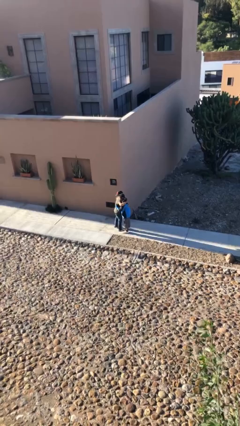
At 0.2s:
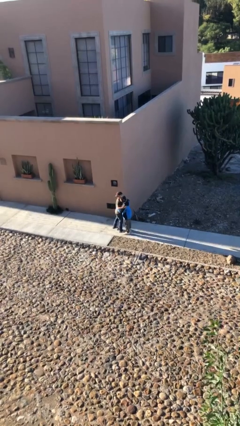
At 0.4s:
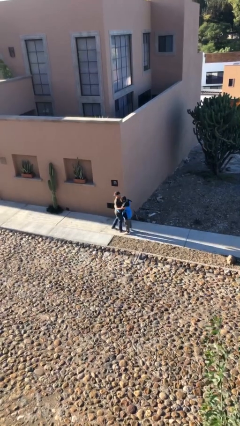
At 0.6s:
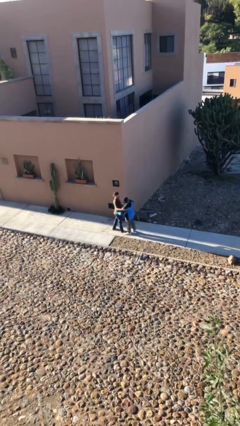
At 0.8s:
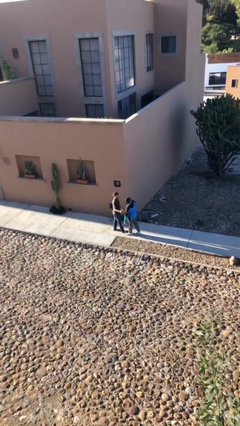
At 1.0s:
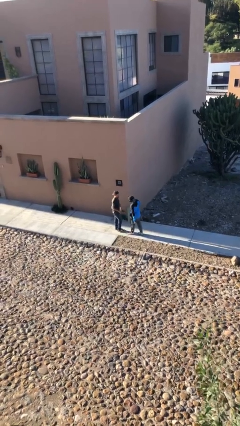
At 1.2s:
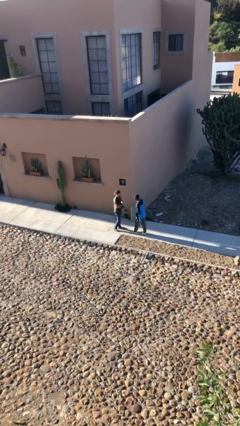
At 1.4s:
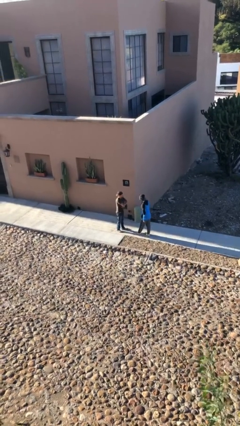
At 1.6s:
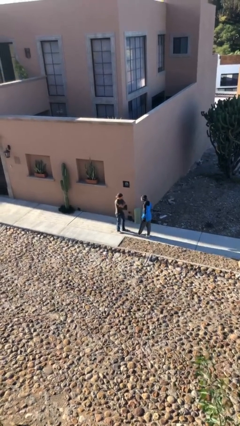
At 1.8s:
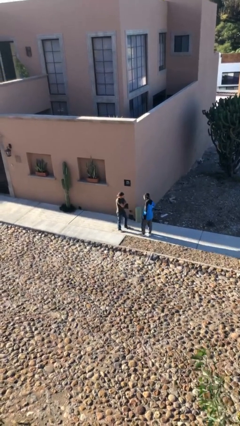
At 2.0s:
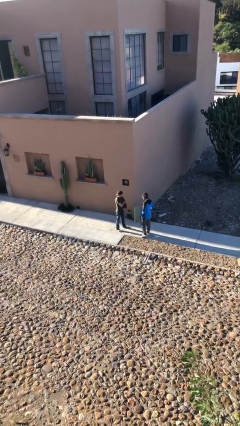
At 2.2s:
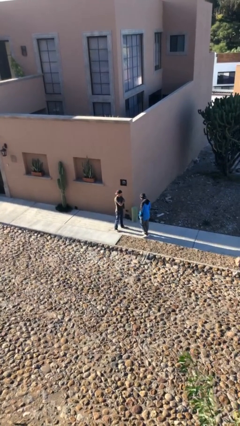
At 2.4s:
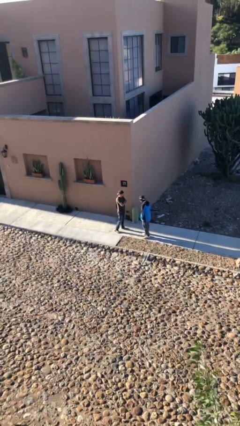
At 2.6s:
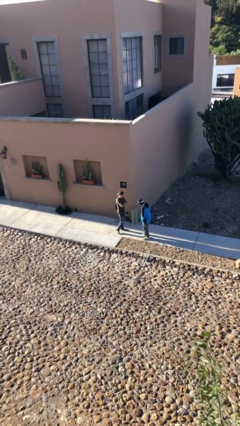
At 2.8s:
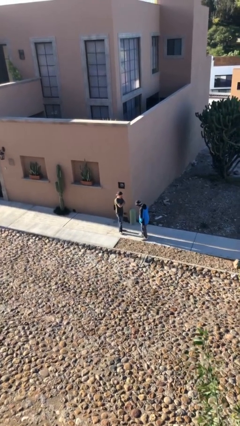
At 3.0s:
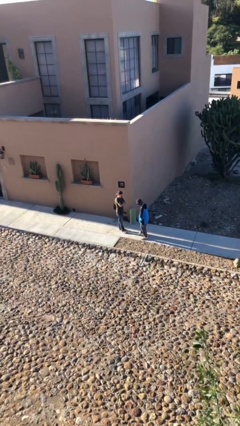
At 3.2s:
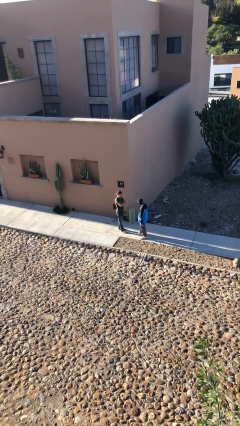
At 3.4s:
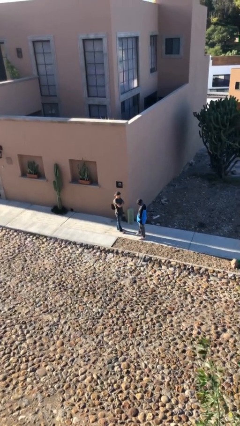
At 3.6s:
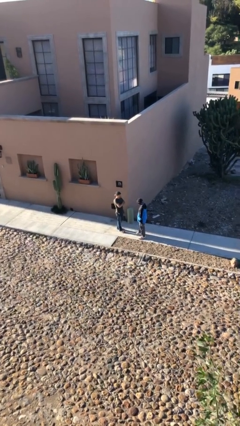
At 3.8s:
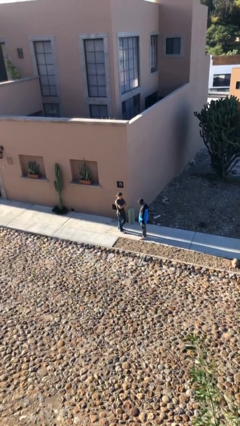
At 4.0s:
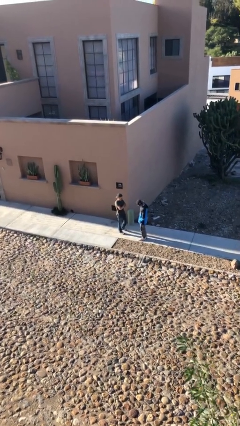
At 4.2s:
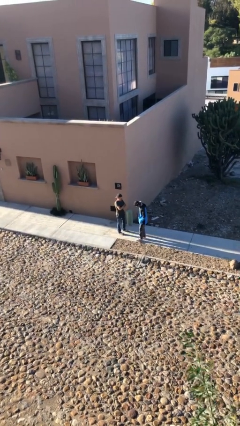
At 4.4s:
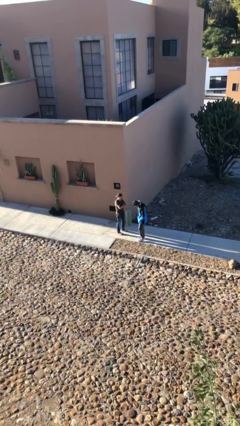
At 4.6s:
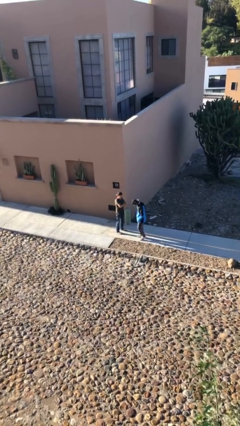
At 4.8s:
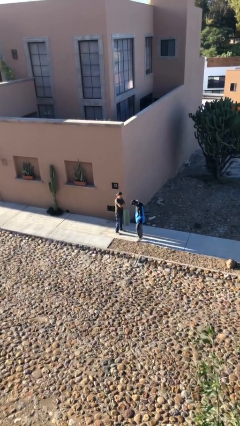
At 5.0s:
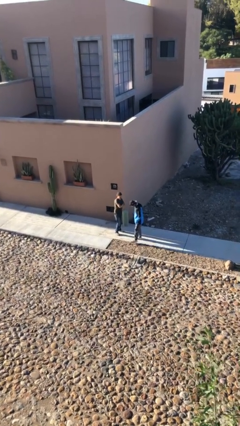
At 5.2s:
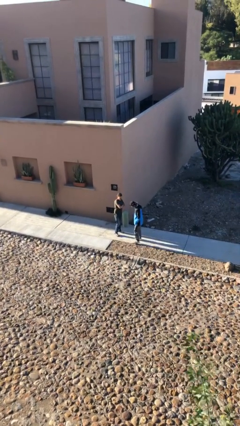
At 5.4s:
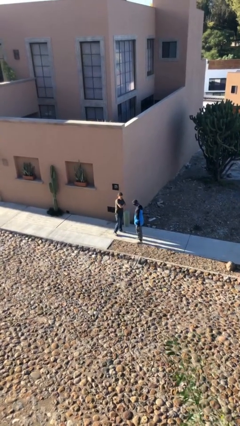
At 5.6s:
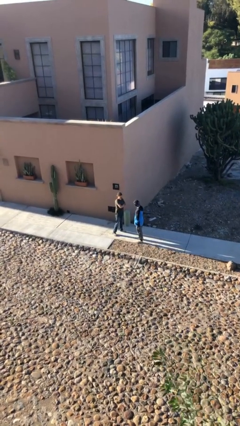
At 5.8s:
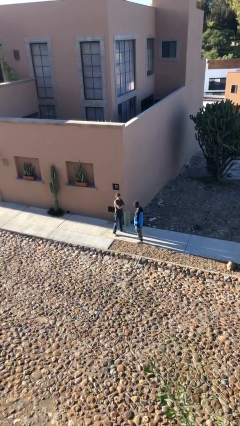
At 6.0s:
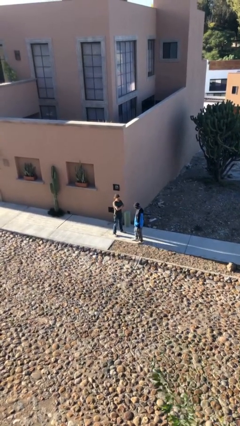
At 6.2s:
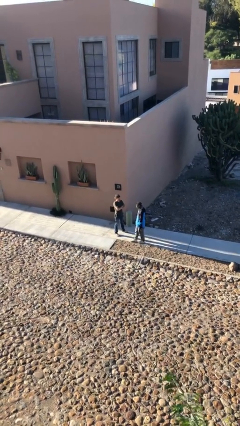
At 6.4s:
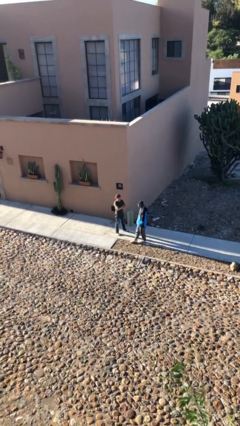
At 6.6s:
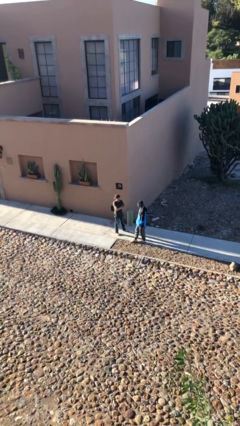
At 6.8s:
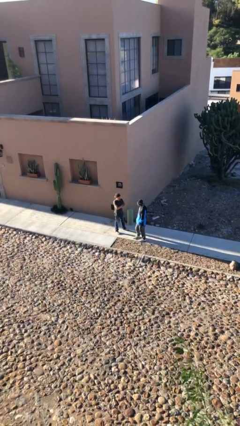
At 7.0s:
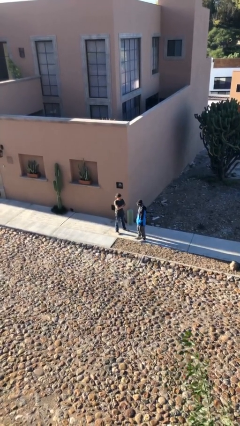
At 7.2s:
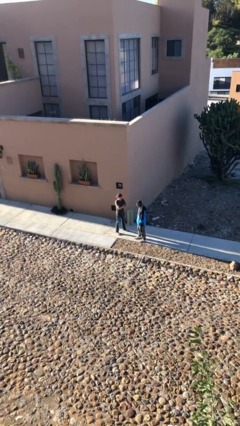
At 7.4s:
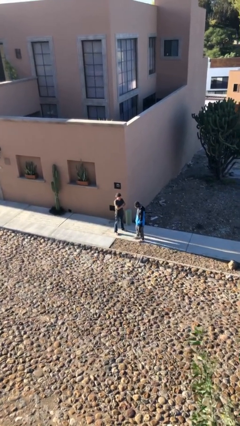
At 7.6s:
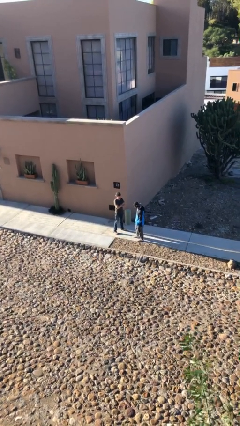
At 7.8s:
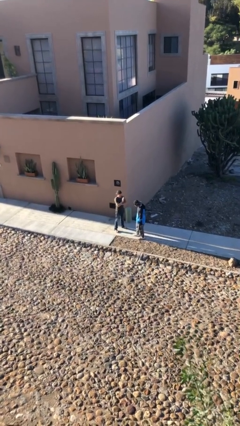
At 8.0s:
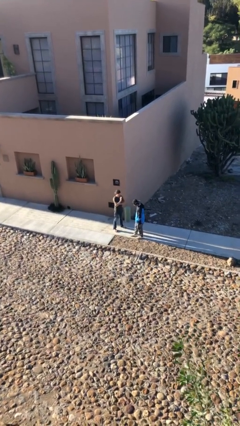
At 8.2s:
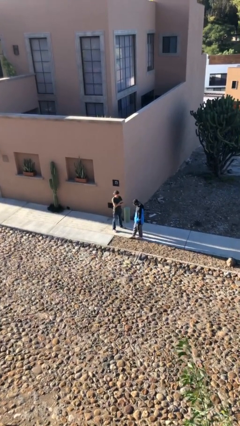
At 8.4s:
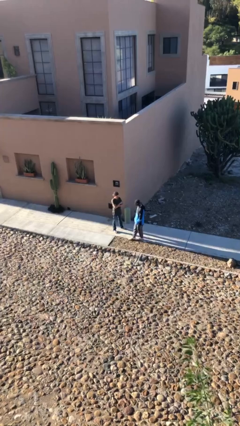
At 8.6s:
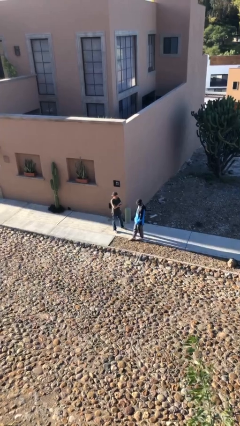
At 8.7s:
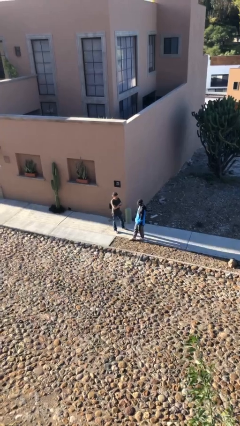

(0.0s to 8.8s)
person talks to person

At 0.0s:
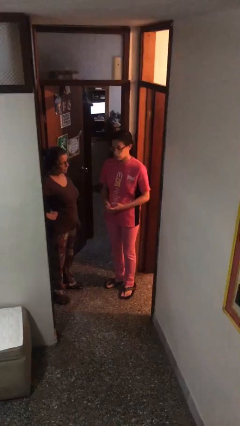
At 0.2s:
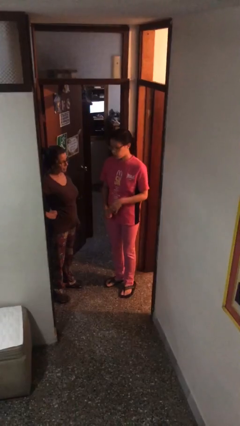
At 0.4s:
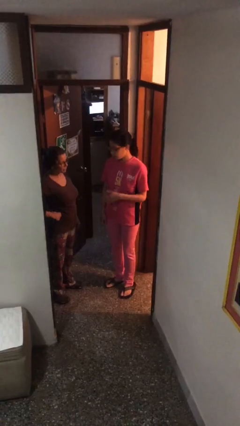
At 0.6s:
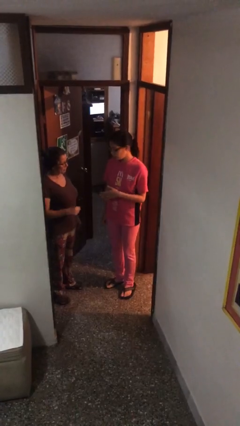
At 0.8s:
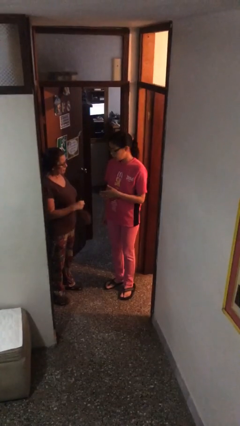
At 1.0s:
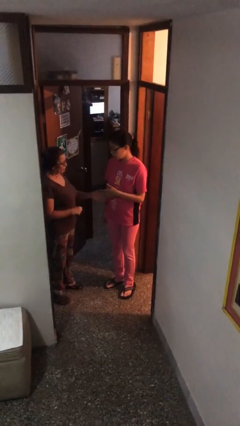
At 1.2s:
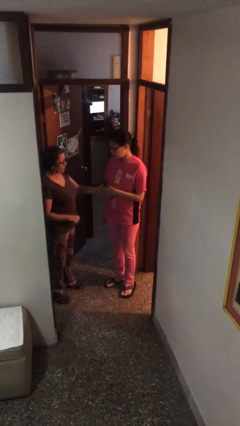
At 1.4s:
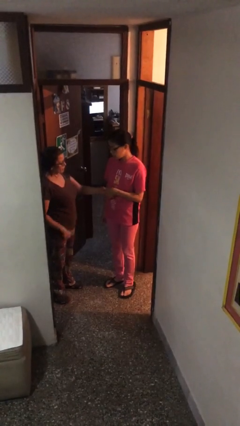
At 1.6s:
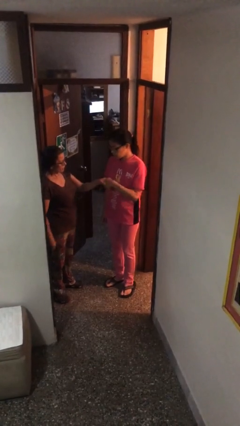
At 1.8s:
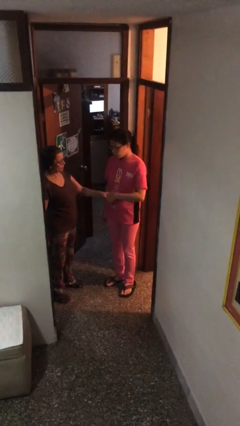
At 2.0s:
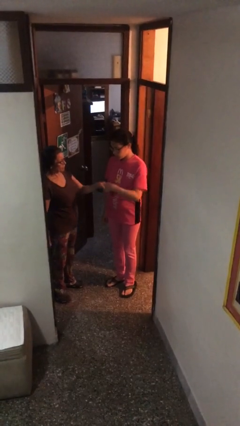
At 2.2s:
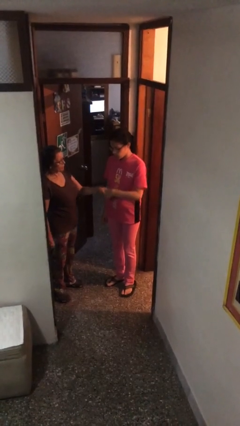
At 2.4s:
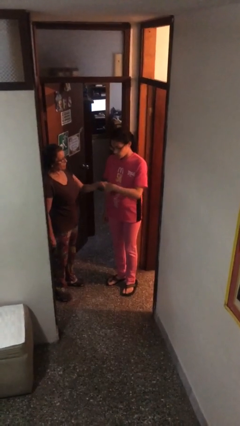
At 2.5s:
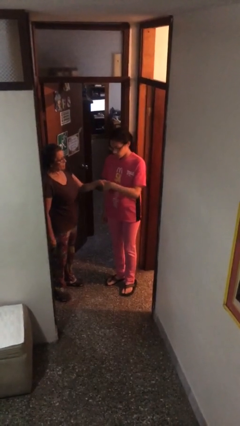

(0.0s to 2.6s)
person shakes hand

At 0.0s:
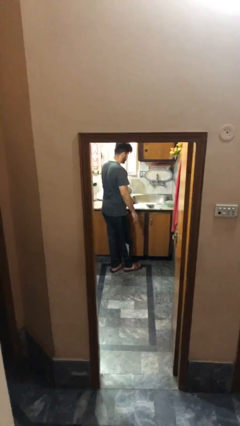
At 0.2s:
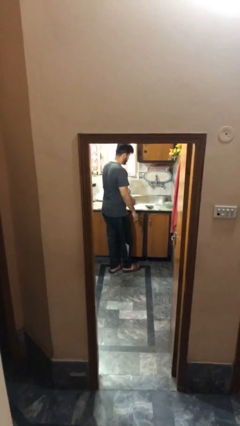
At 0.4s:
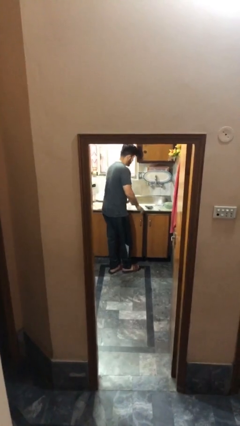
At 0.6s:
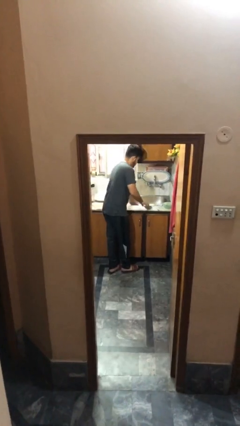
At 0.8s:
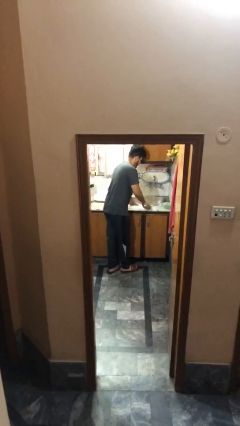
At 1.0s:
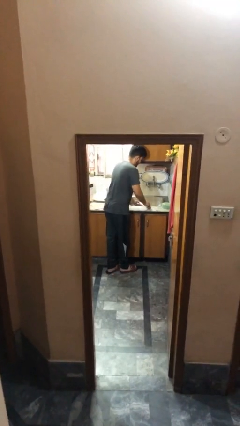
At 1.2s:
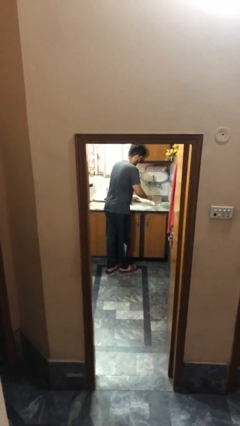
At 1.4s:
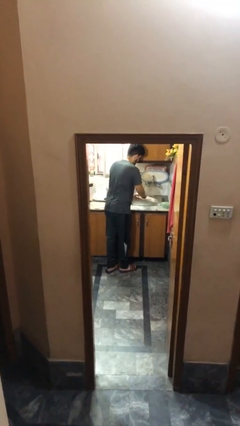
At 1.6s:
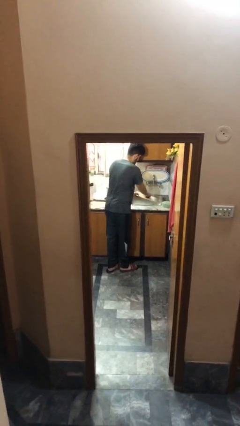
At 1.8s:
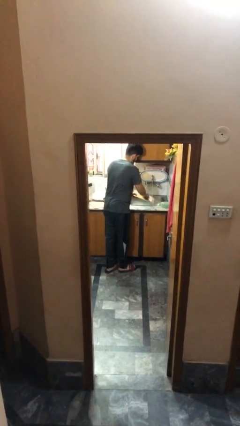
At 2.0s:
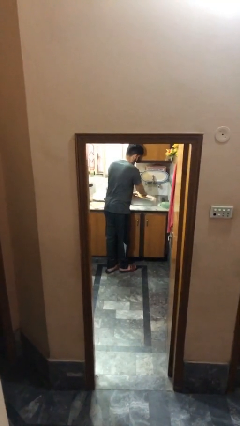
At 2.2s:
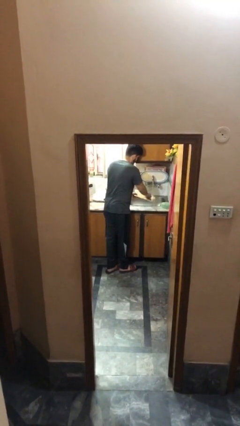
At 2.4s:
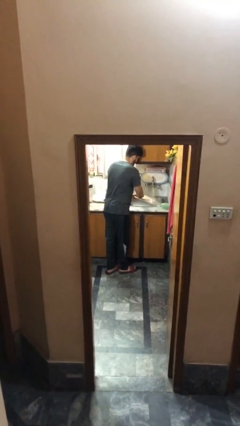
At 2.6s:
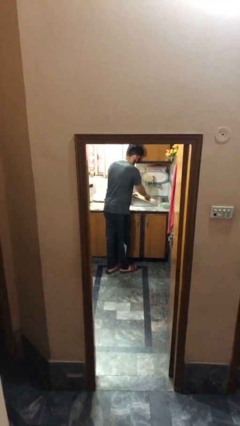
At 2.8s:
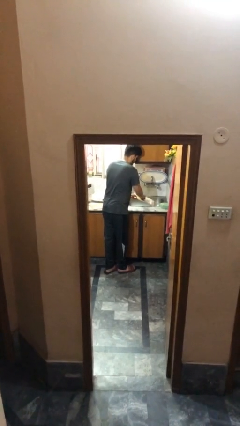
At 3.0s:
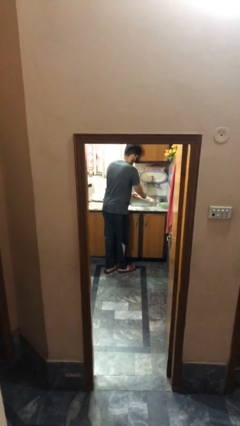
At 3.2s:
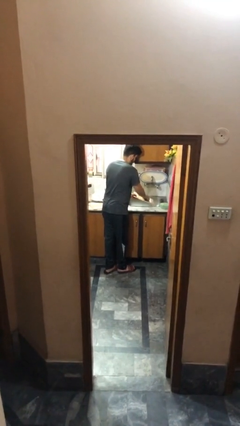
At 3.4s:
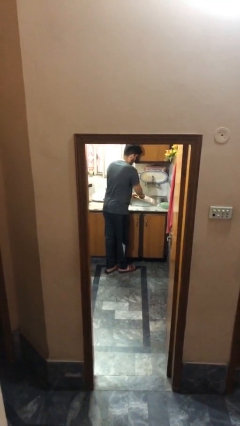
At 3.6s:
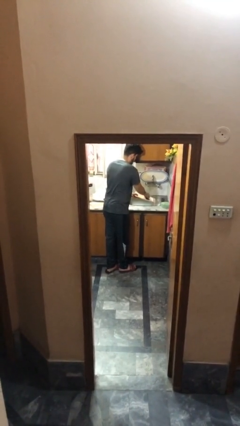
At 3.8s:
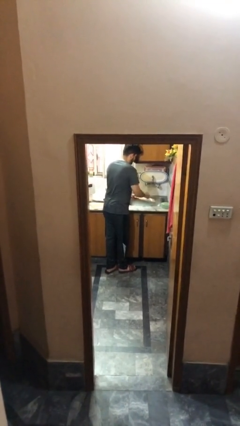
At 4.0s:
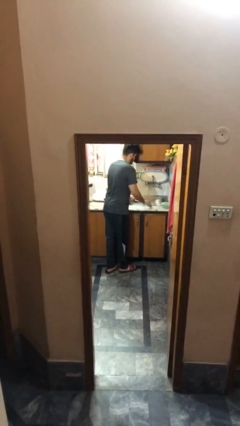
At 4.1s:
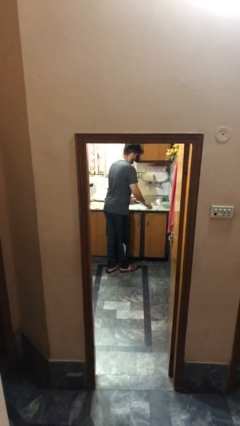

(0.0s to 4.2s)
person washes dish

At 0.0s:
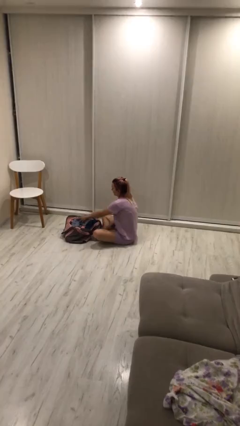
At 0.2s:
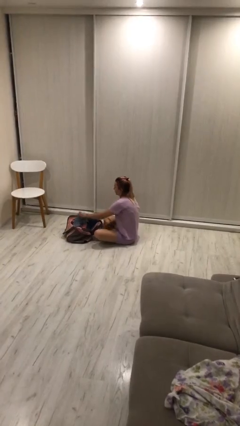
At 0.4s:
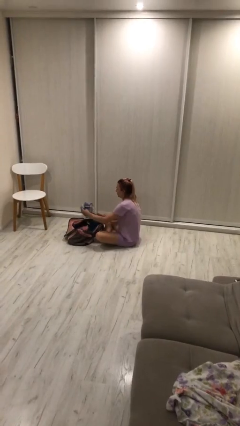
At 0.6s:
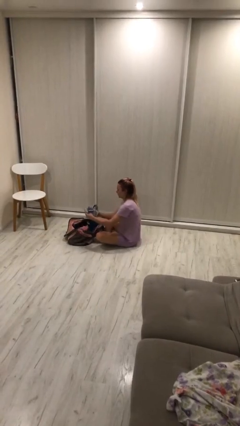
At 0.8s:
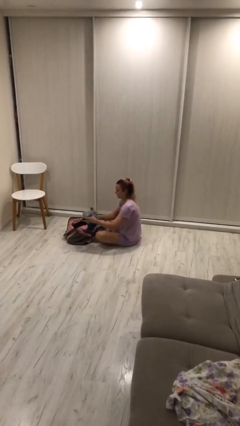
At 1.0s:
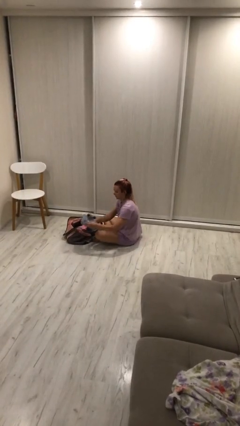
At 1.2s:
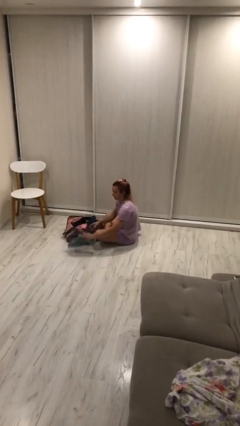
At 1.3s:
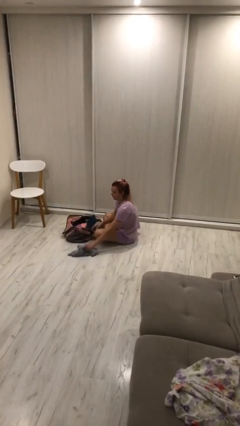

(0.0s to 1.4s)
person unloads clothes from suitcase

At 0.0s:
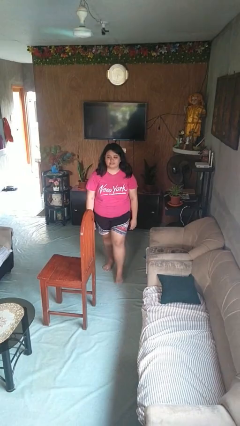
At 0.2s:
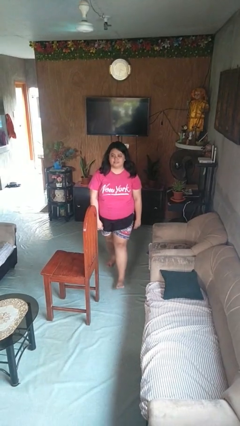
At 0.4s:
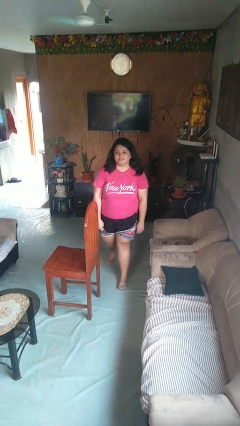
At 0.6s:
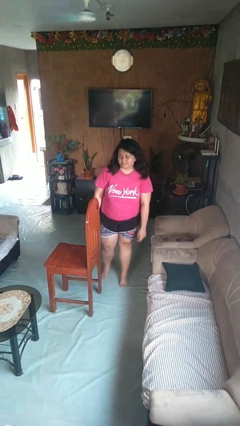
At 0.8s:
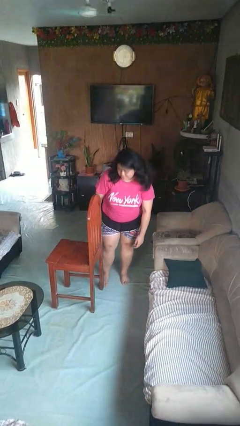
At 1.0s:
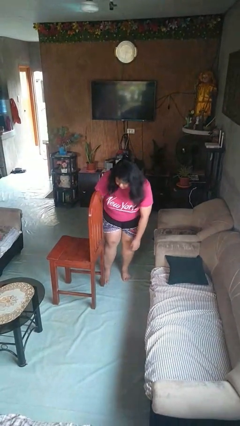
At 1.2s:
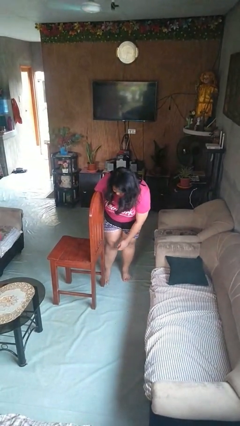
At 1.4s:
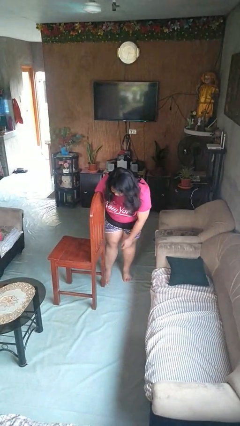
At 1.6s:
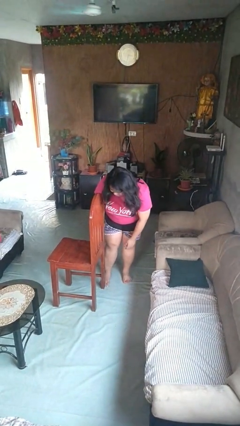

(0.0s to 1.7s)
person stubs toe
